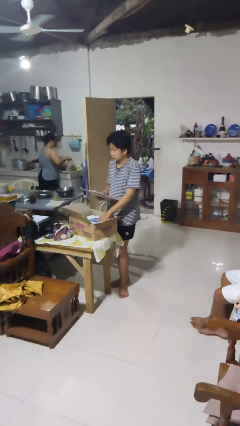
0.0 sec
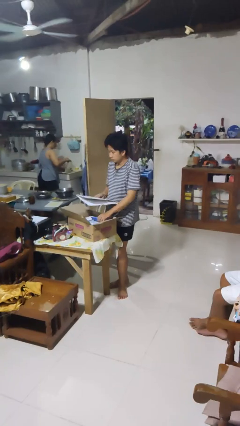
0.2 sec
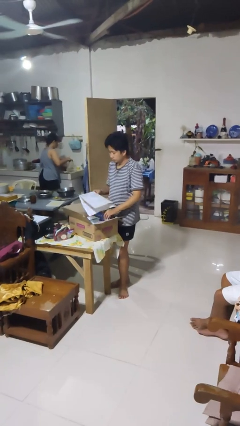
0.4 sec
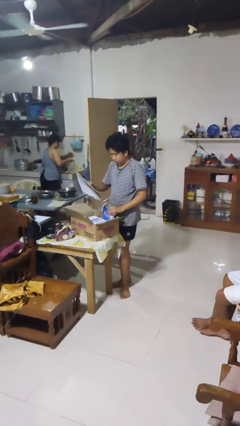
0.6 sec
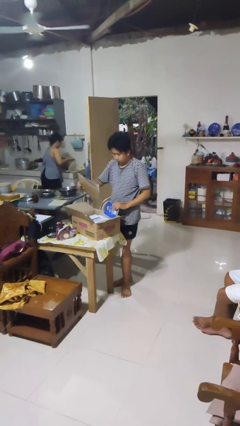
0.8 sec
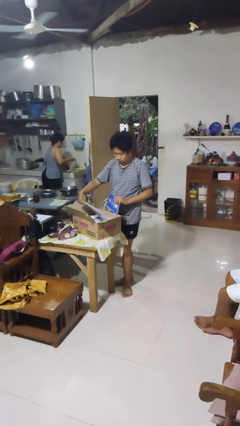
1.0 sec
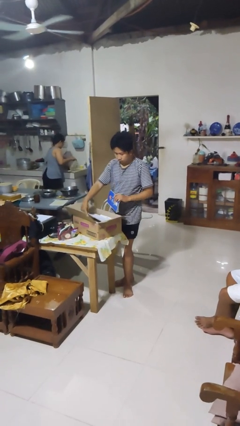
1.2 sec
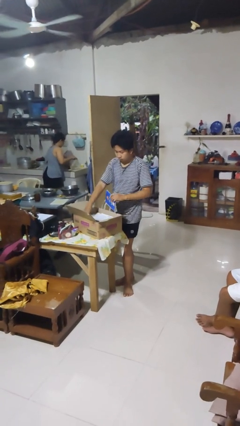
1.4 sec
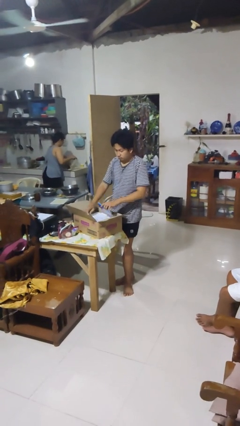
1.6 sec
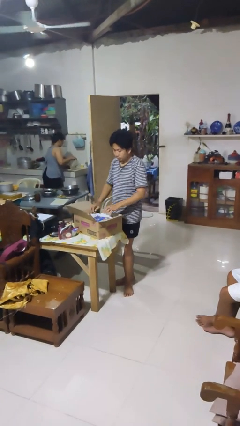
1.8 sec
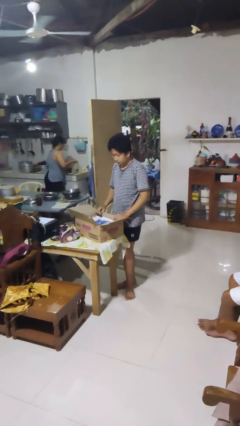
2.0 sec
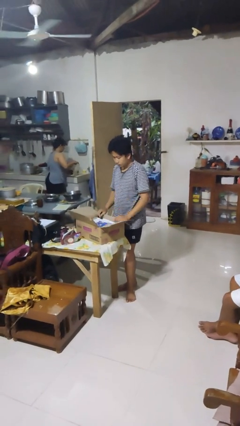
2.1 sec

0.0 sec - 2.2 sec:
person puts object into box

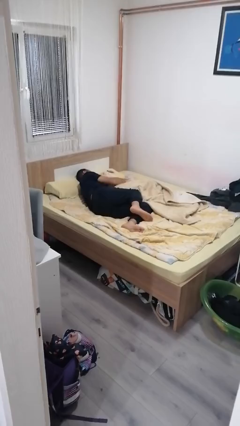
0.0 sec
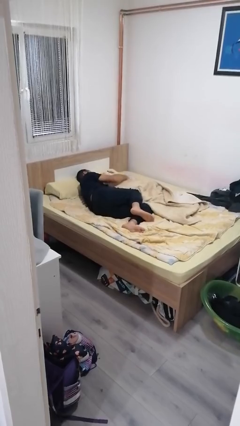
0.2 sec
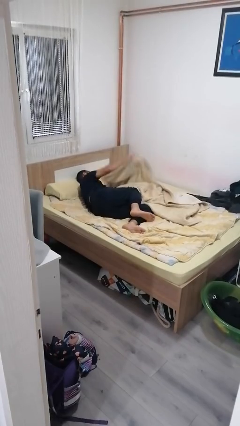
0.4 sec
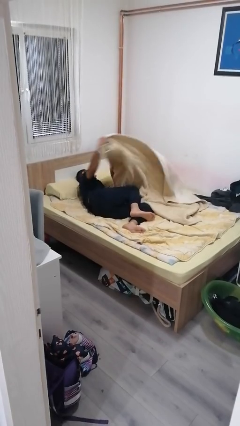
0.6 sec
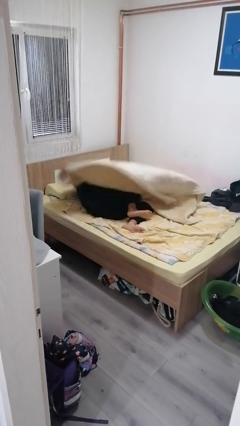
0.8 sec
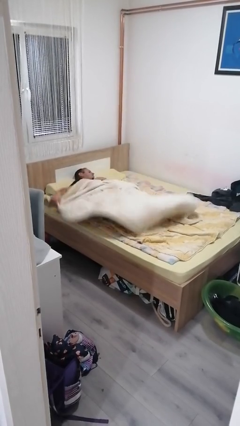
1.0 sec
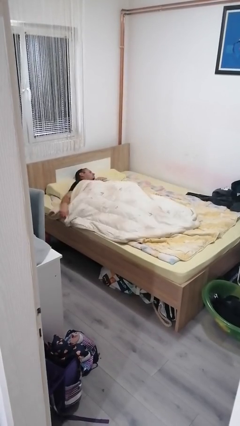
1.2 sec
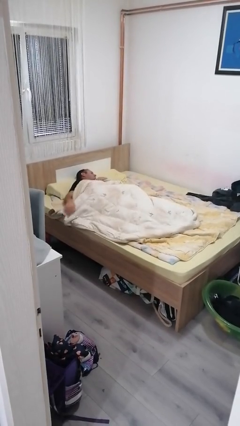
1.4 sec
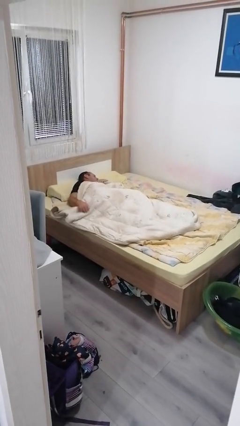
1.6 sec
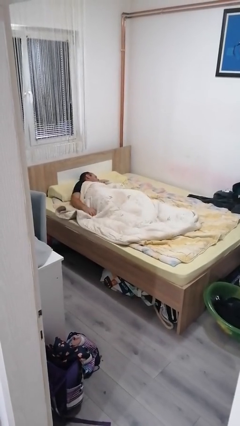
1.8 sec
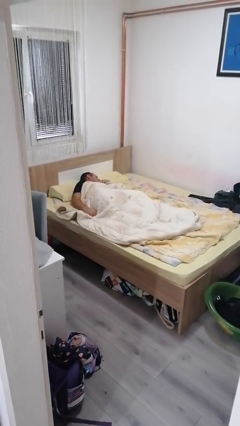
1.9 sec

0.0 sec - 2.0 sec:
person covers with bedsheets

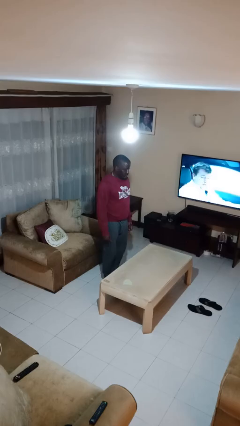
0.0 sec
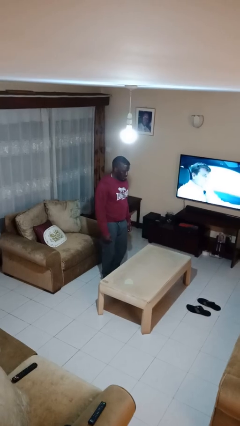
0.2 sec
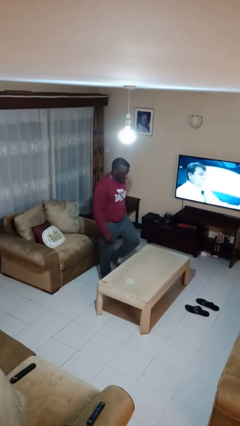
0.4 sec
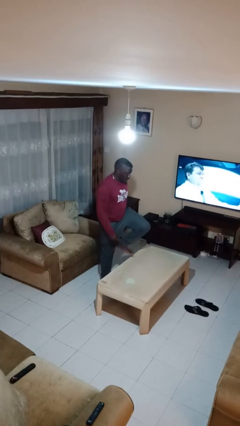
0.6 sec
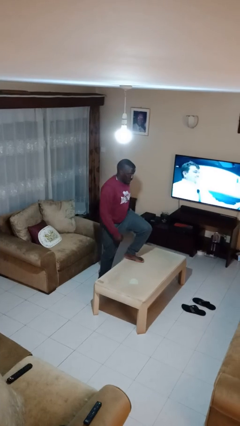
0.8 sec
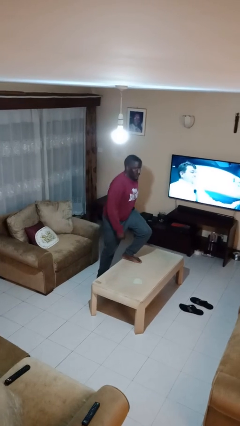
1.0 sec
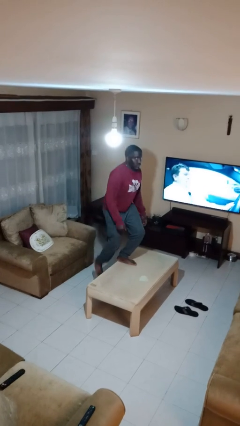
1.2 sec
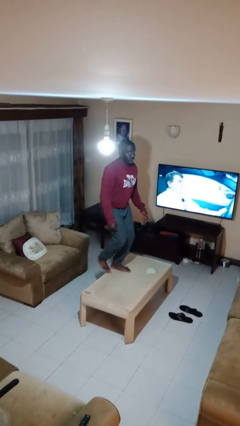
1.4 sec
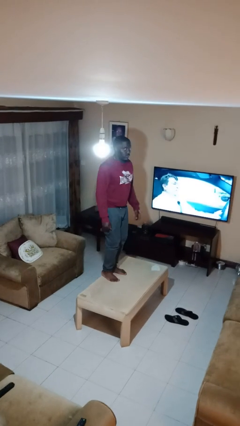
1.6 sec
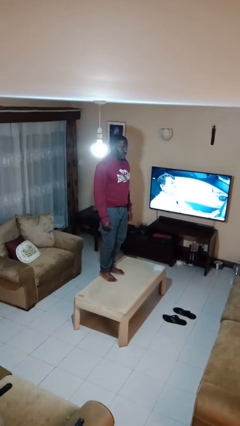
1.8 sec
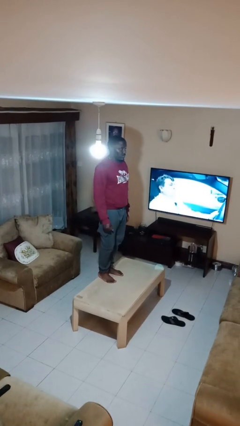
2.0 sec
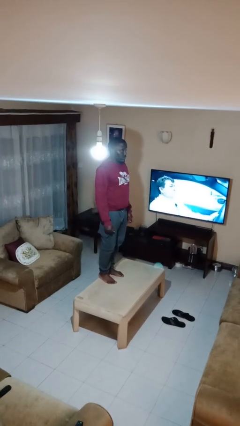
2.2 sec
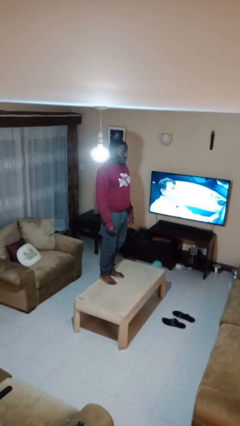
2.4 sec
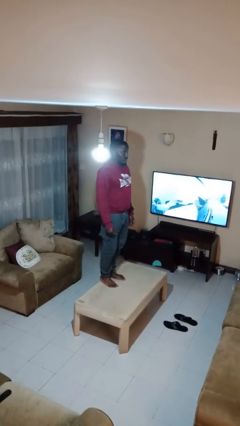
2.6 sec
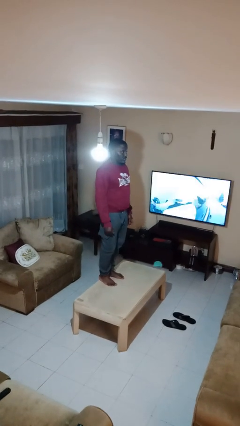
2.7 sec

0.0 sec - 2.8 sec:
person climbs on table

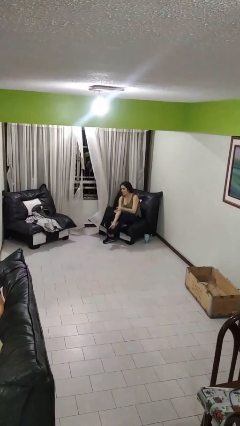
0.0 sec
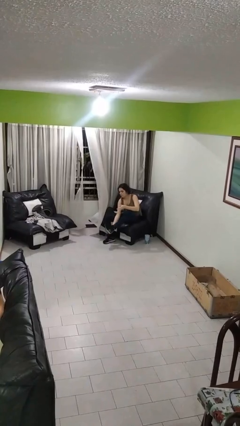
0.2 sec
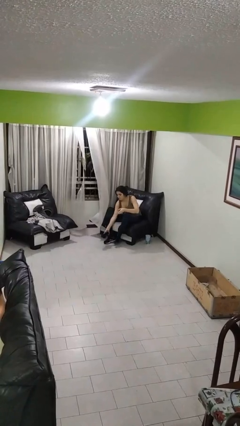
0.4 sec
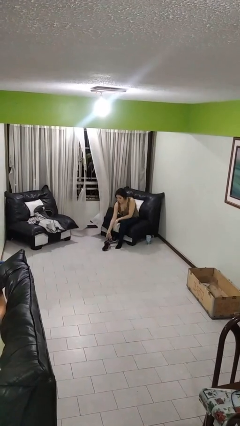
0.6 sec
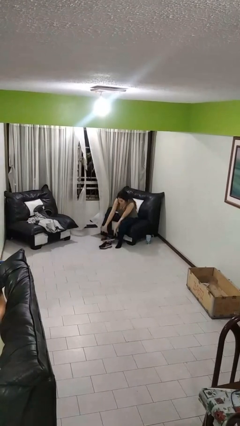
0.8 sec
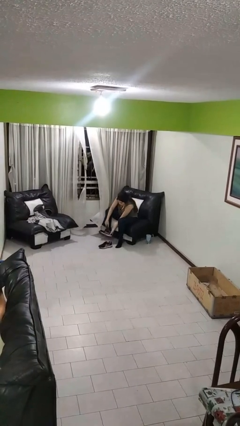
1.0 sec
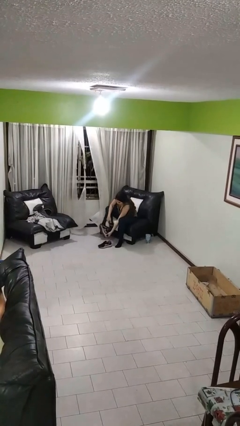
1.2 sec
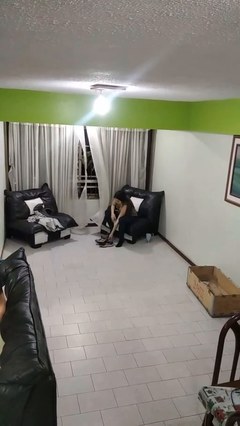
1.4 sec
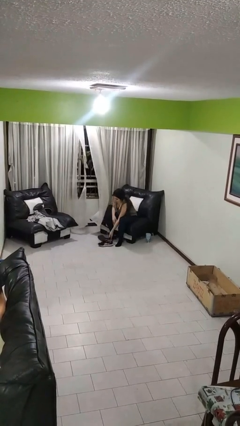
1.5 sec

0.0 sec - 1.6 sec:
person takes off shoes

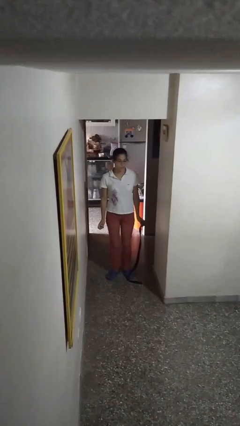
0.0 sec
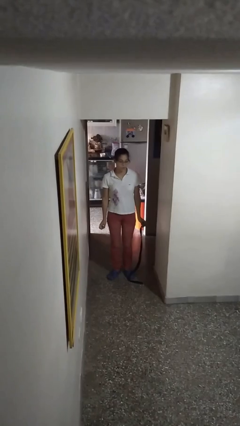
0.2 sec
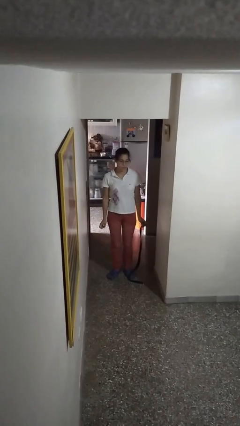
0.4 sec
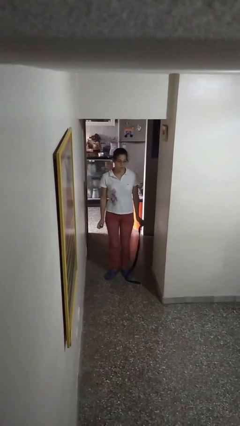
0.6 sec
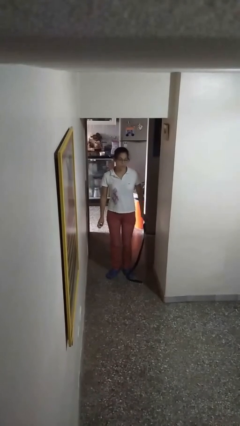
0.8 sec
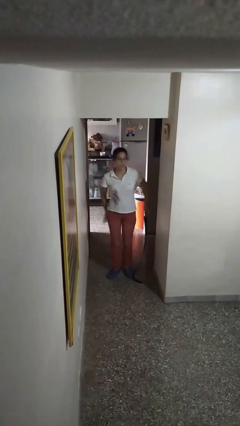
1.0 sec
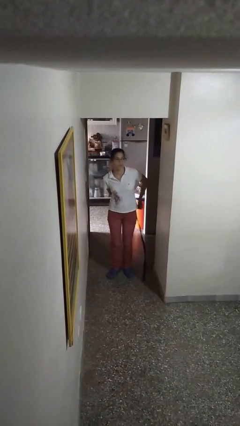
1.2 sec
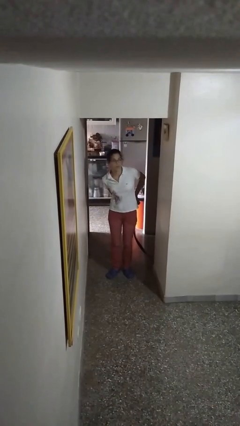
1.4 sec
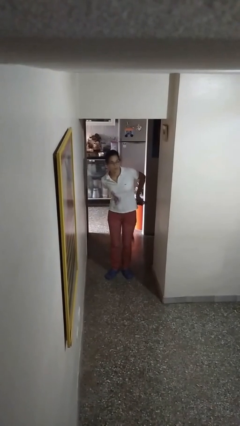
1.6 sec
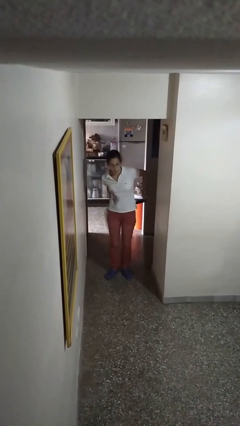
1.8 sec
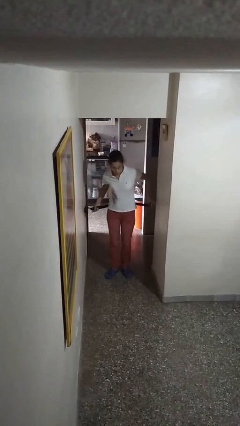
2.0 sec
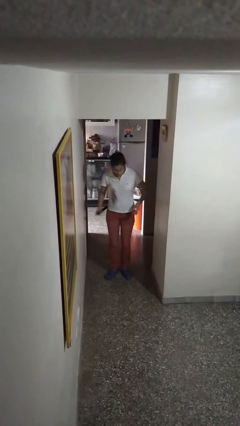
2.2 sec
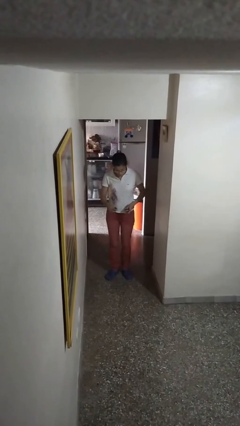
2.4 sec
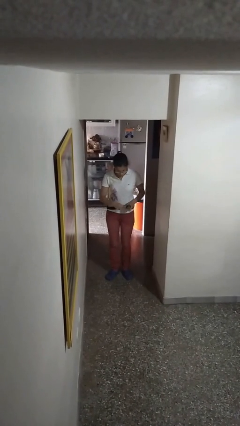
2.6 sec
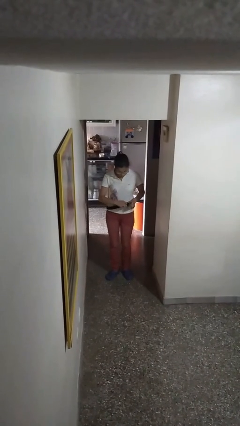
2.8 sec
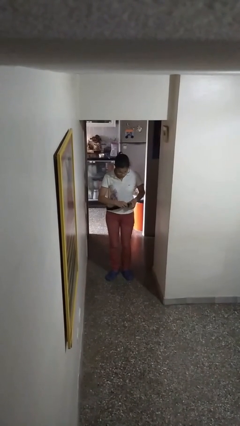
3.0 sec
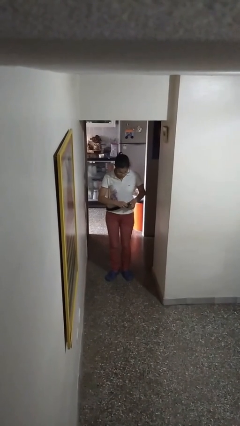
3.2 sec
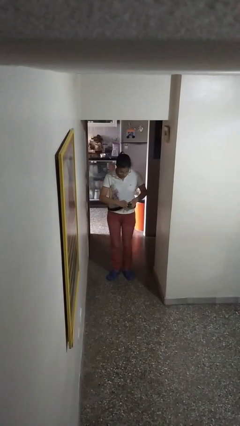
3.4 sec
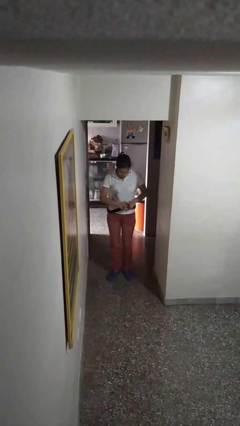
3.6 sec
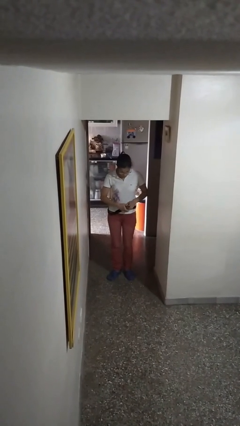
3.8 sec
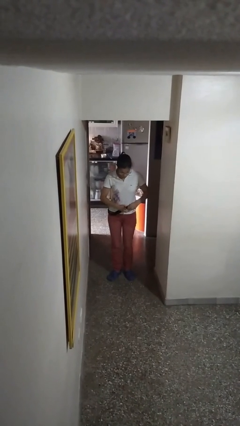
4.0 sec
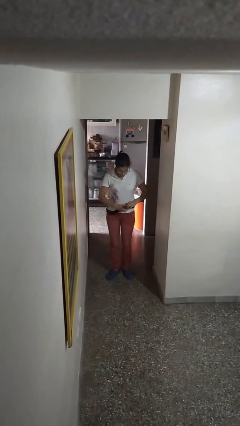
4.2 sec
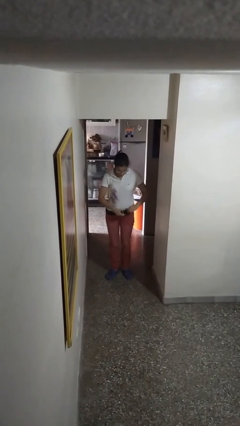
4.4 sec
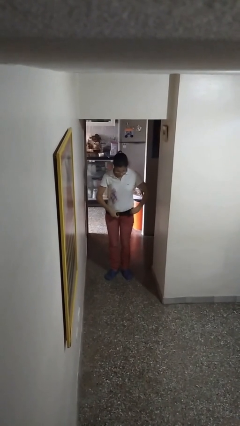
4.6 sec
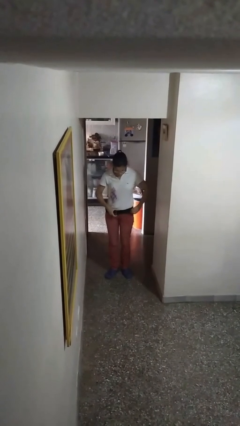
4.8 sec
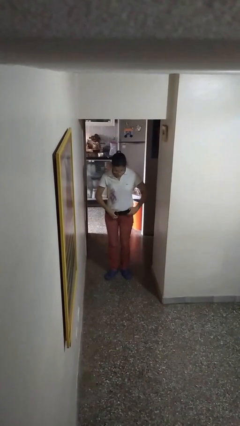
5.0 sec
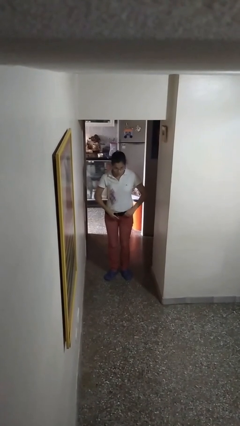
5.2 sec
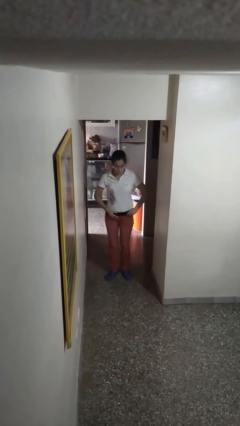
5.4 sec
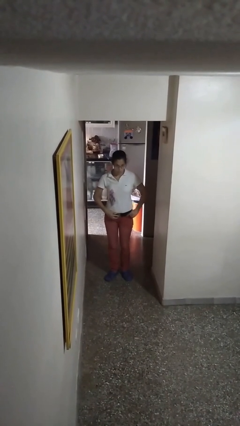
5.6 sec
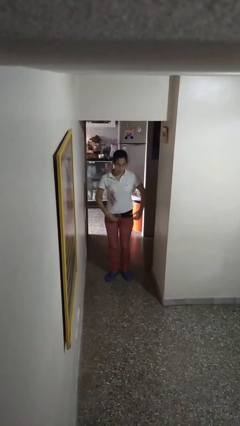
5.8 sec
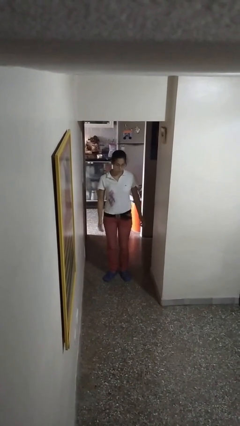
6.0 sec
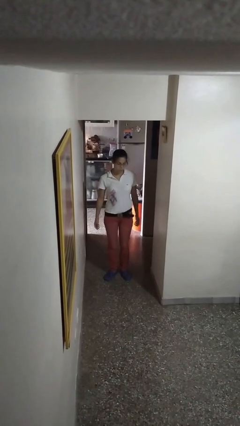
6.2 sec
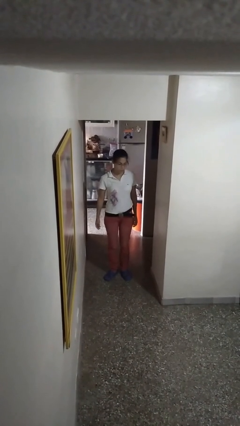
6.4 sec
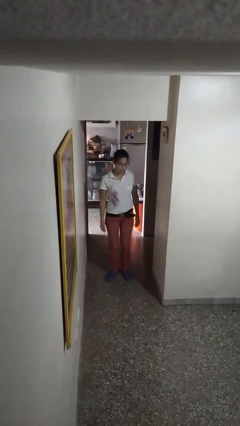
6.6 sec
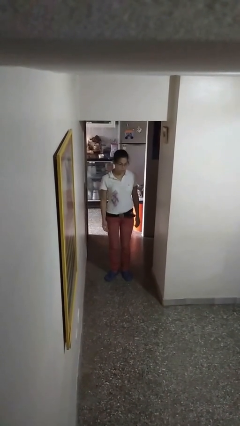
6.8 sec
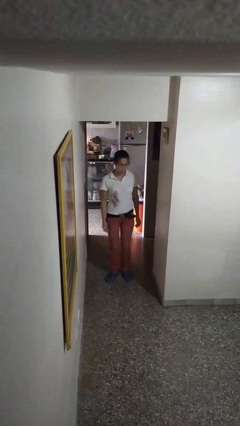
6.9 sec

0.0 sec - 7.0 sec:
person puts on belt

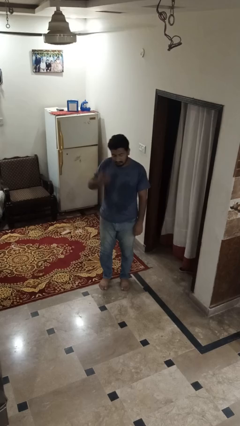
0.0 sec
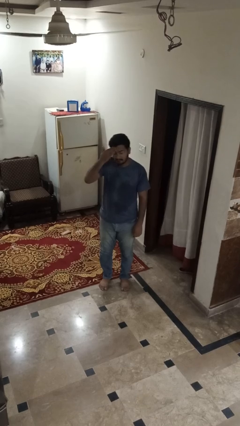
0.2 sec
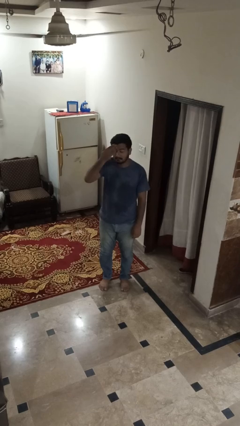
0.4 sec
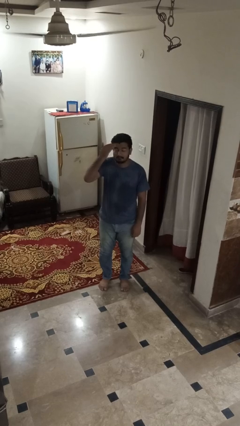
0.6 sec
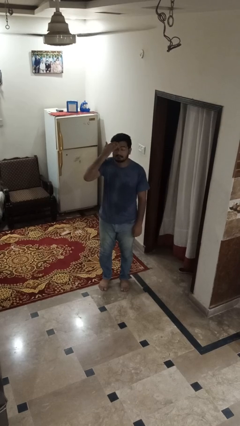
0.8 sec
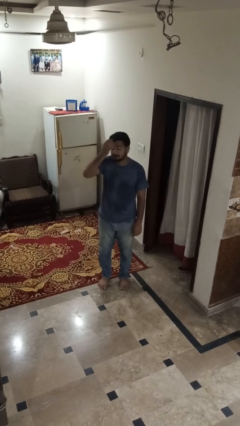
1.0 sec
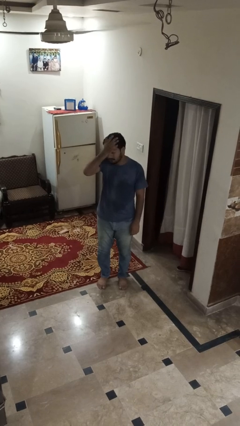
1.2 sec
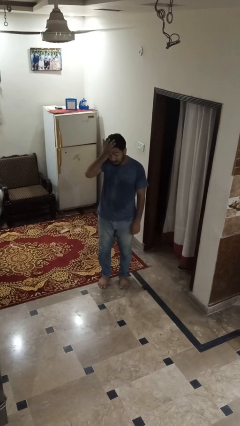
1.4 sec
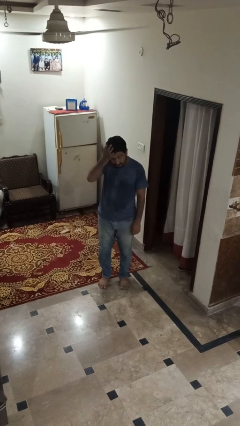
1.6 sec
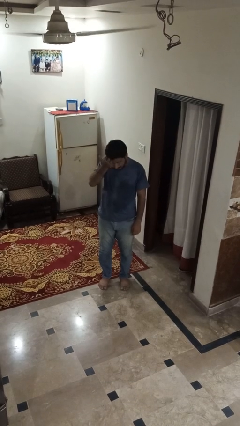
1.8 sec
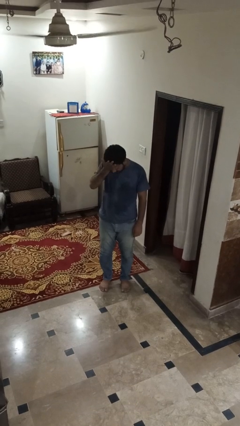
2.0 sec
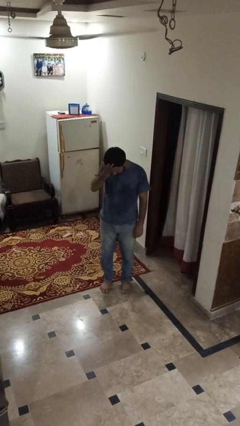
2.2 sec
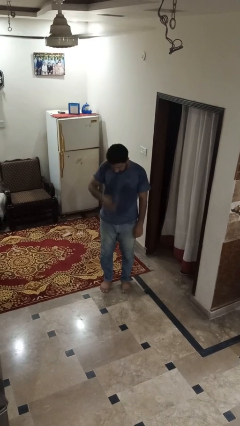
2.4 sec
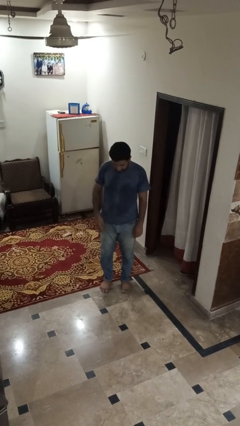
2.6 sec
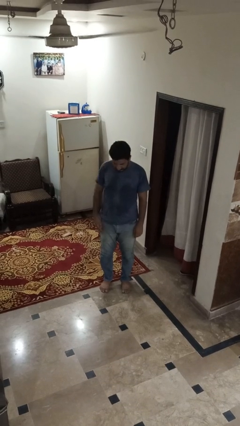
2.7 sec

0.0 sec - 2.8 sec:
person swats bug
